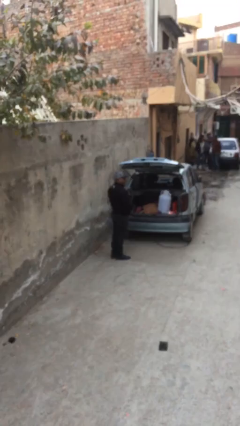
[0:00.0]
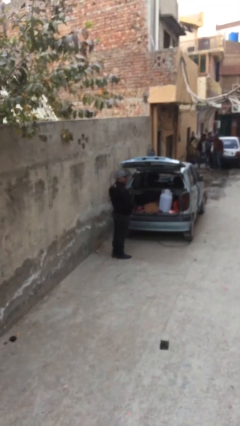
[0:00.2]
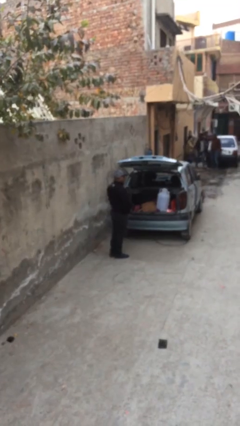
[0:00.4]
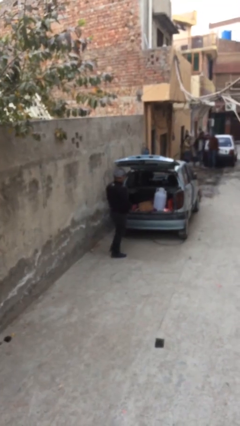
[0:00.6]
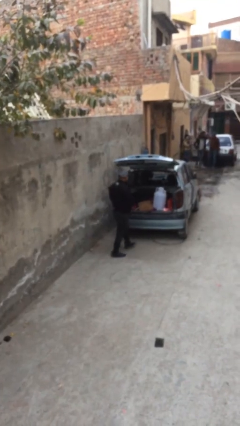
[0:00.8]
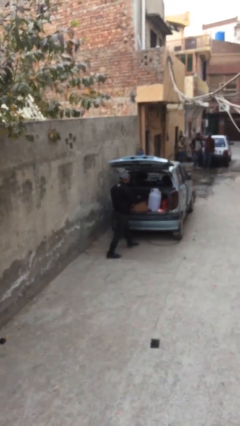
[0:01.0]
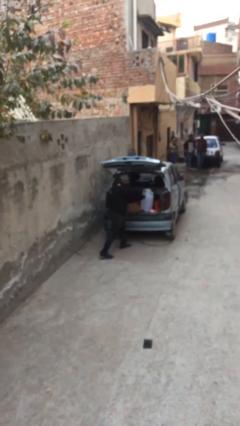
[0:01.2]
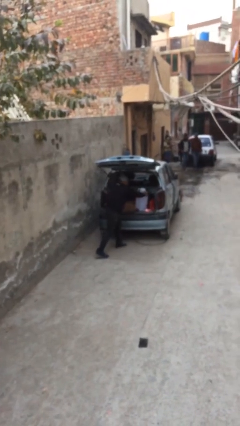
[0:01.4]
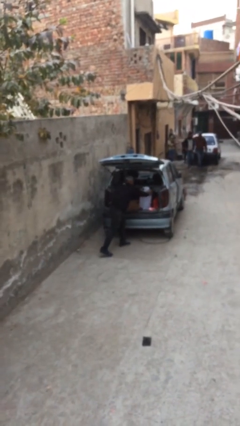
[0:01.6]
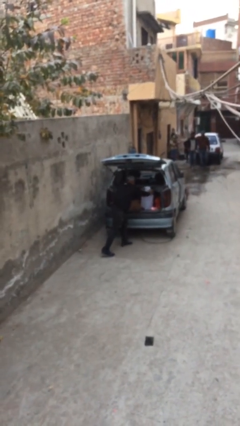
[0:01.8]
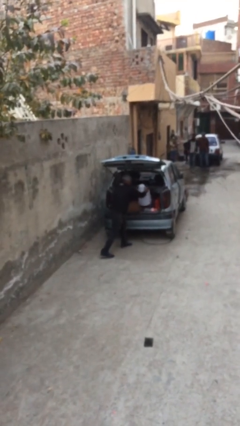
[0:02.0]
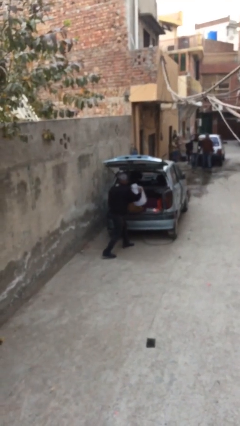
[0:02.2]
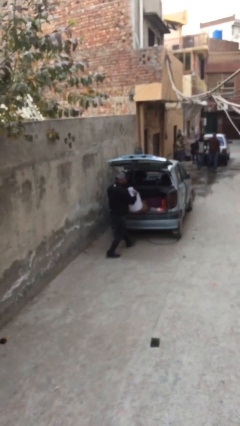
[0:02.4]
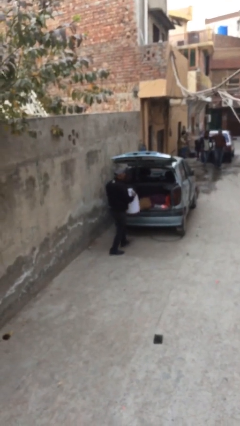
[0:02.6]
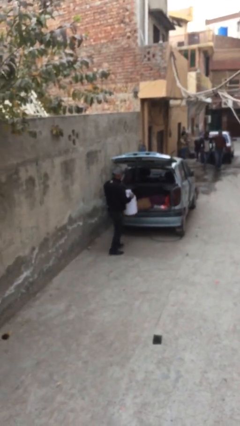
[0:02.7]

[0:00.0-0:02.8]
person unloads car

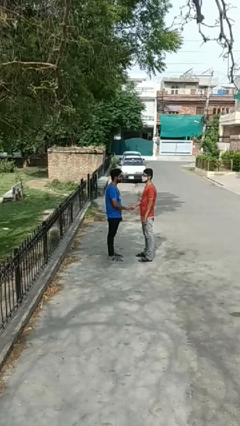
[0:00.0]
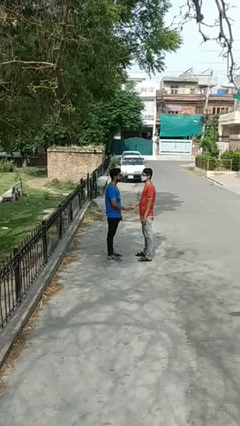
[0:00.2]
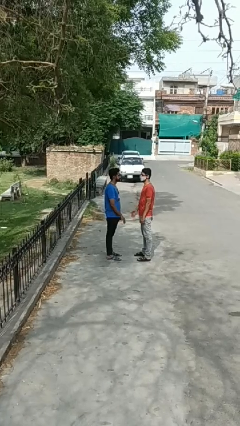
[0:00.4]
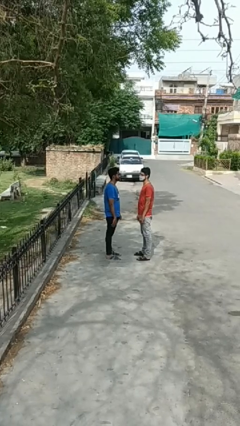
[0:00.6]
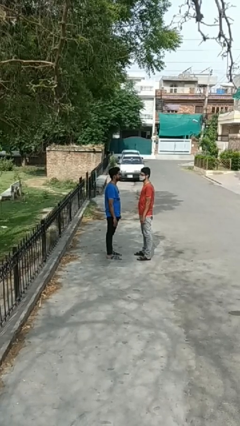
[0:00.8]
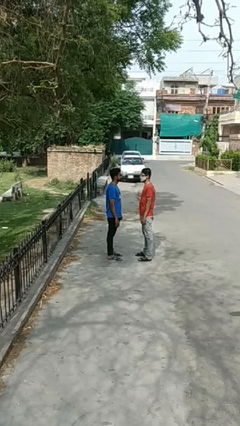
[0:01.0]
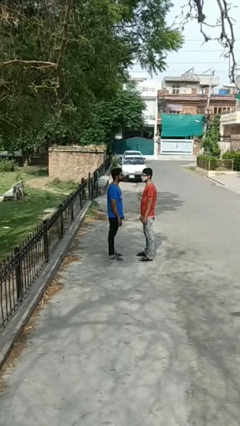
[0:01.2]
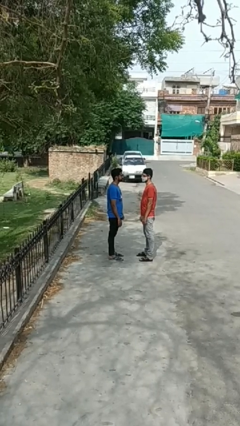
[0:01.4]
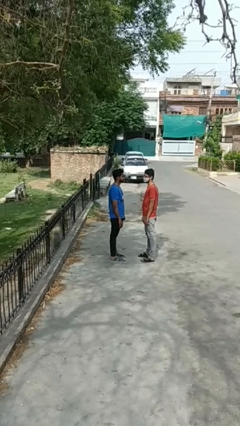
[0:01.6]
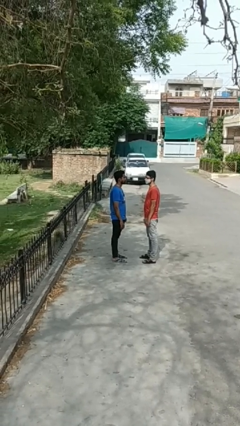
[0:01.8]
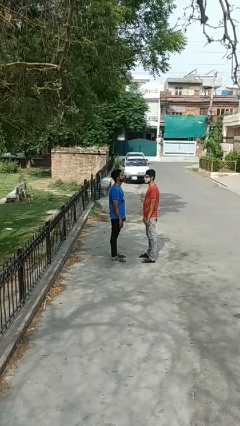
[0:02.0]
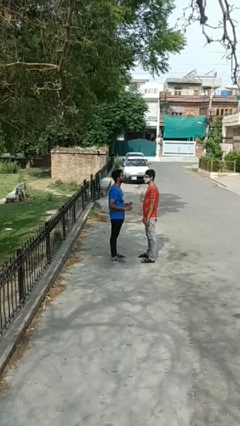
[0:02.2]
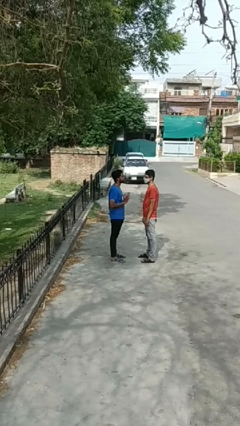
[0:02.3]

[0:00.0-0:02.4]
person highfives hand

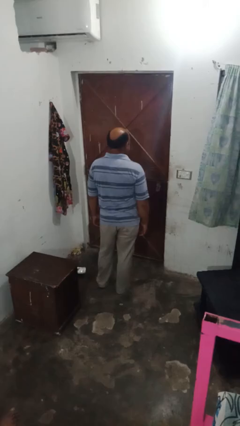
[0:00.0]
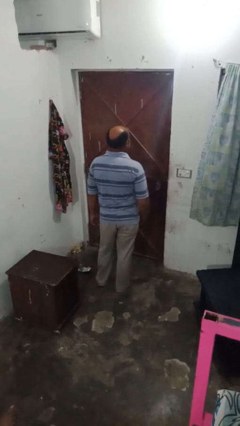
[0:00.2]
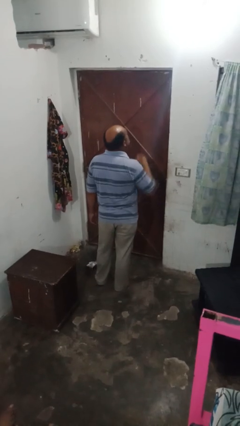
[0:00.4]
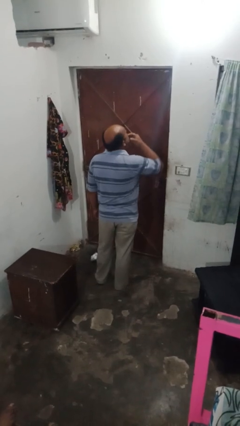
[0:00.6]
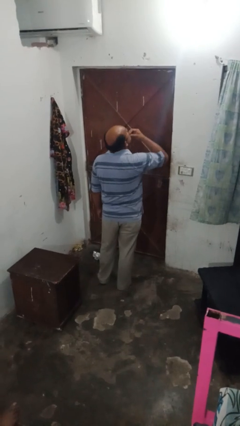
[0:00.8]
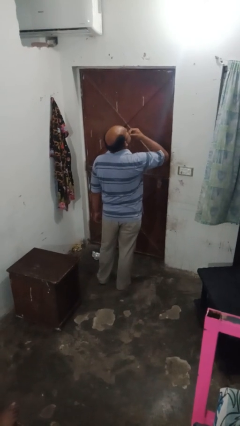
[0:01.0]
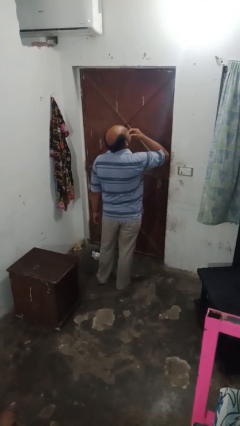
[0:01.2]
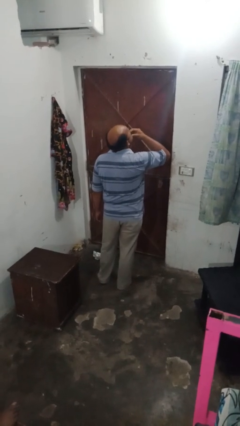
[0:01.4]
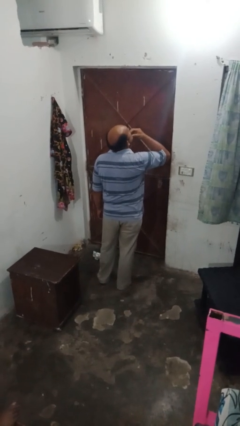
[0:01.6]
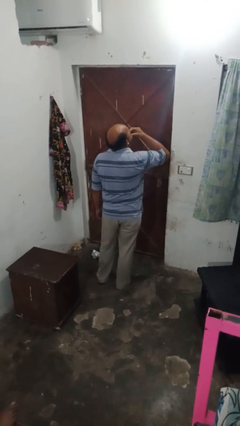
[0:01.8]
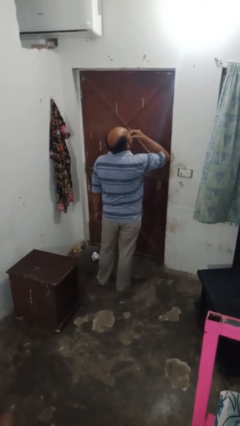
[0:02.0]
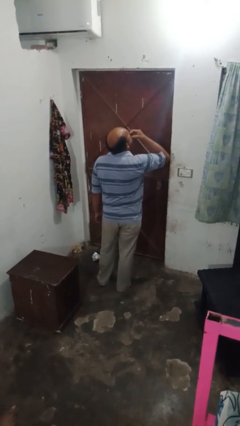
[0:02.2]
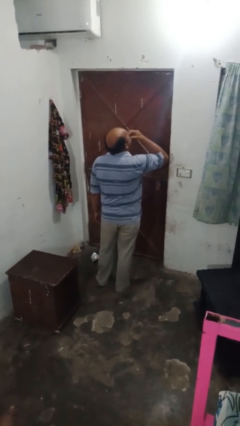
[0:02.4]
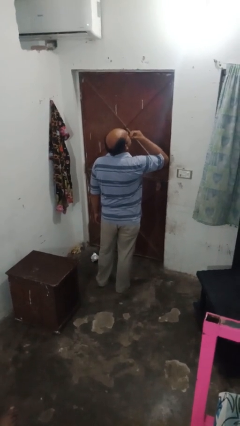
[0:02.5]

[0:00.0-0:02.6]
person strokes chin

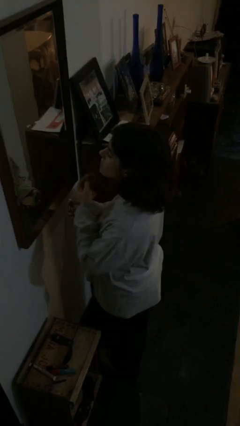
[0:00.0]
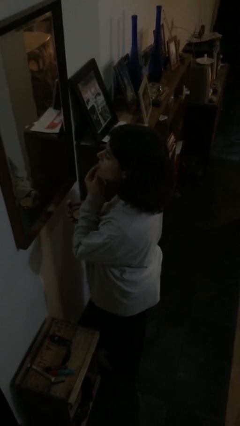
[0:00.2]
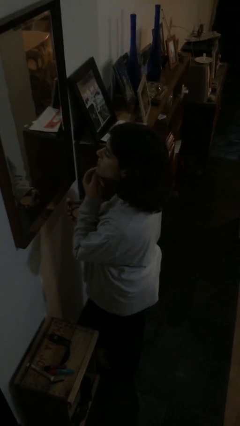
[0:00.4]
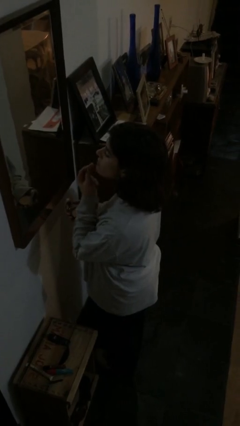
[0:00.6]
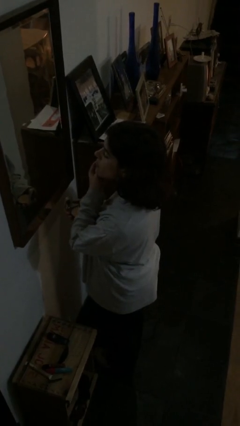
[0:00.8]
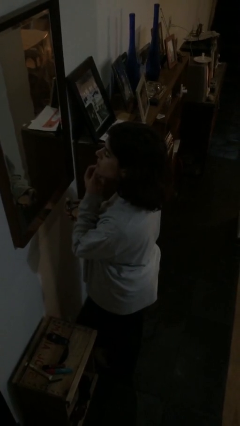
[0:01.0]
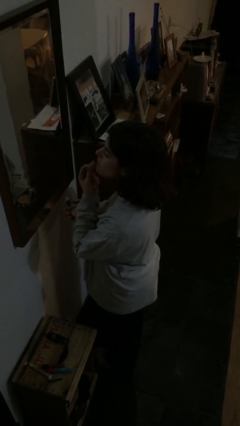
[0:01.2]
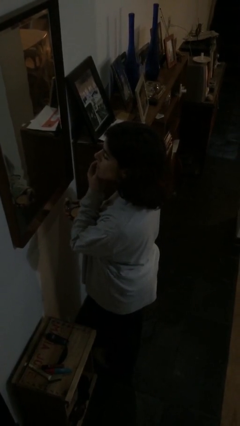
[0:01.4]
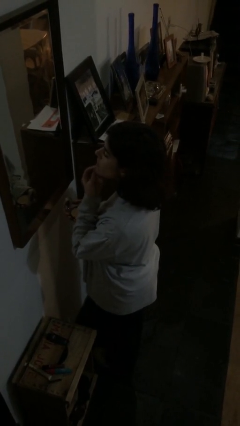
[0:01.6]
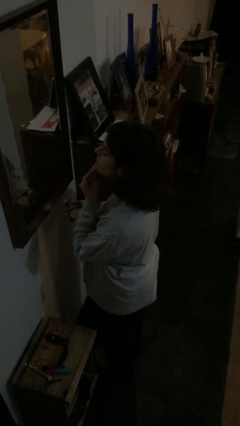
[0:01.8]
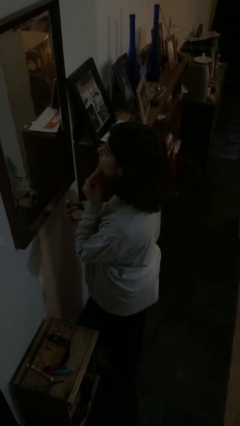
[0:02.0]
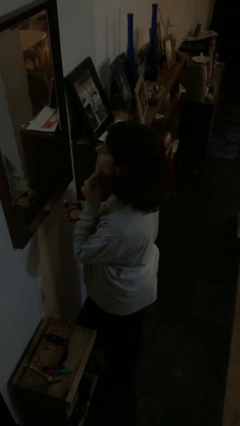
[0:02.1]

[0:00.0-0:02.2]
person applies foundation makeup

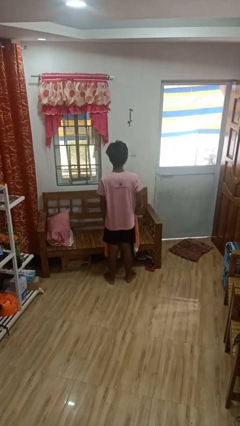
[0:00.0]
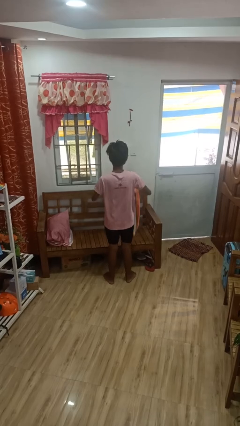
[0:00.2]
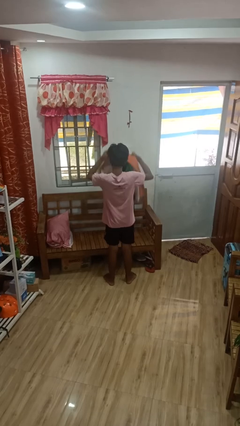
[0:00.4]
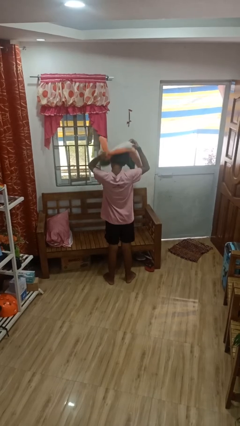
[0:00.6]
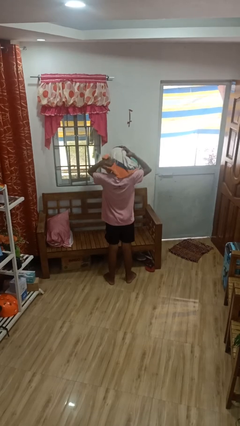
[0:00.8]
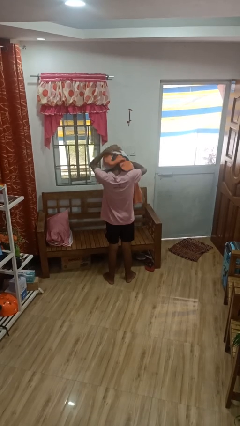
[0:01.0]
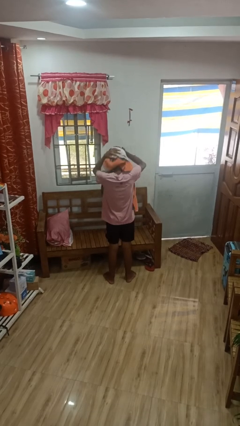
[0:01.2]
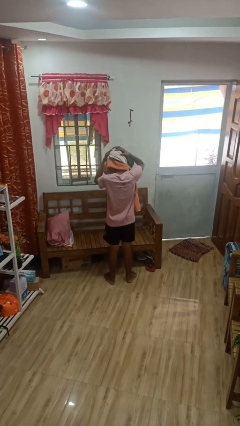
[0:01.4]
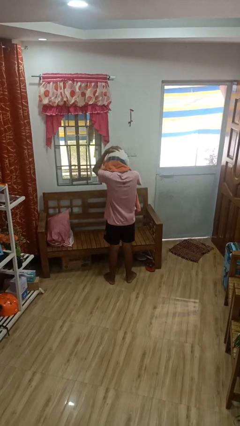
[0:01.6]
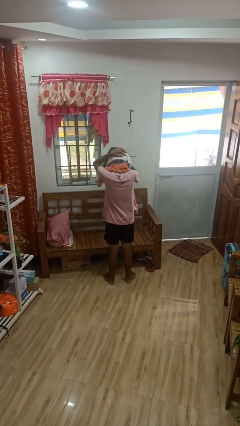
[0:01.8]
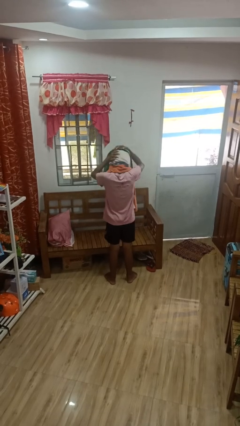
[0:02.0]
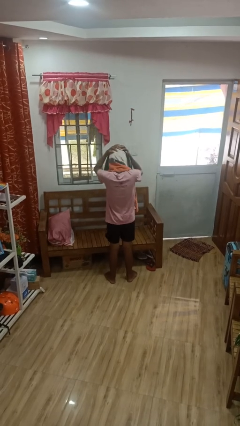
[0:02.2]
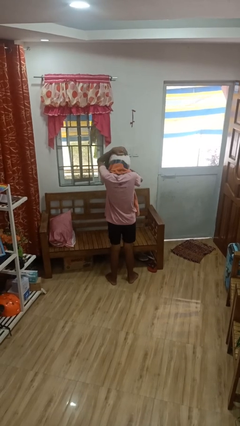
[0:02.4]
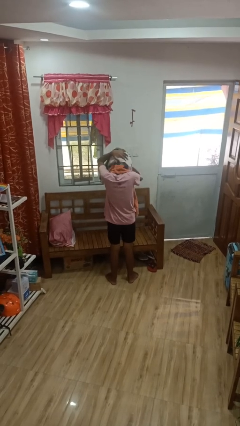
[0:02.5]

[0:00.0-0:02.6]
person dries hair with towel

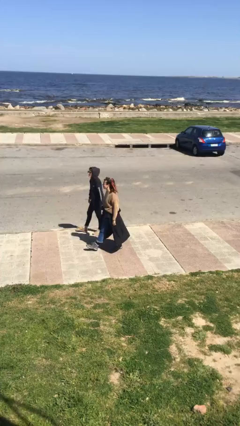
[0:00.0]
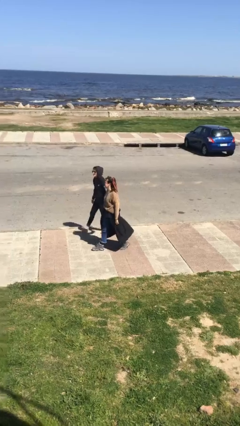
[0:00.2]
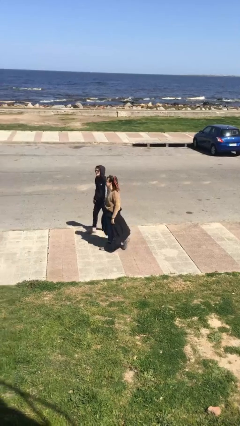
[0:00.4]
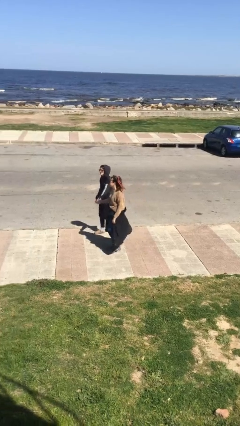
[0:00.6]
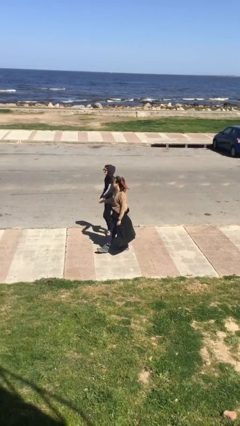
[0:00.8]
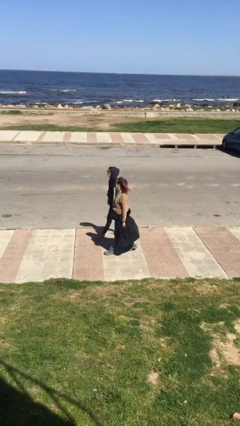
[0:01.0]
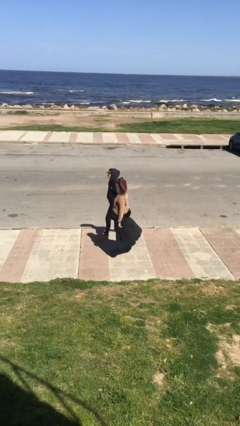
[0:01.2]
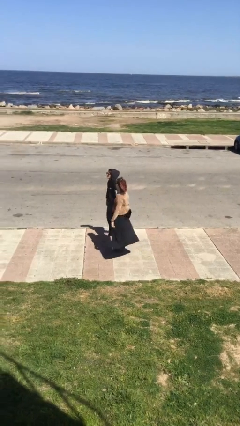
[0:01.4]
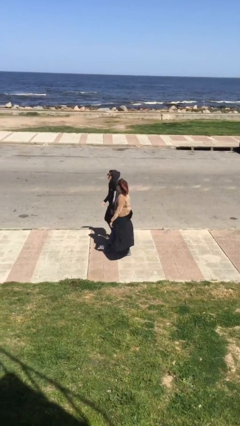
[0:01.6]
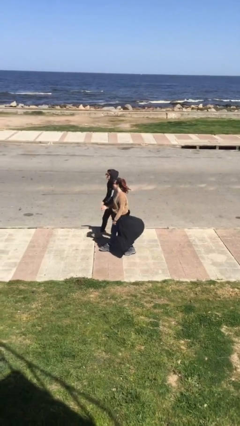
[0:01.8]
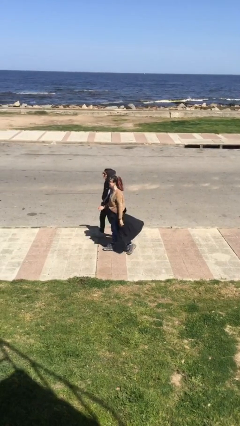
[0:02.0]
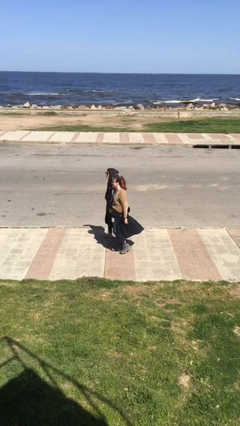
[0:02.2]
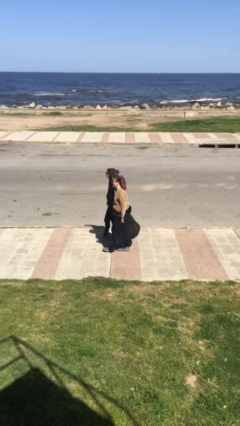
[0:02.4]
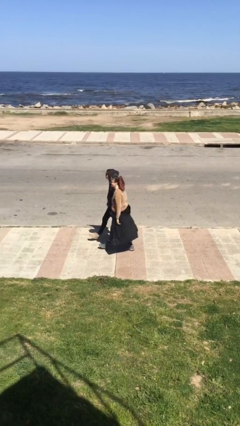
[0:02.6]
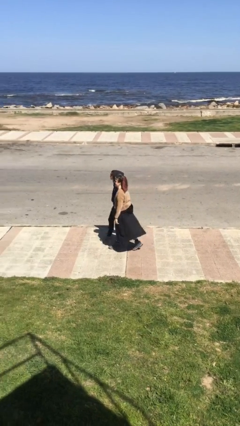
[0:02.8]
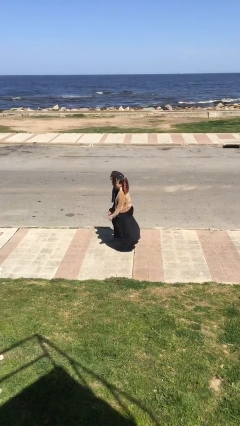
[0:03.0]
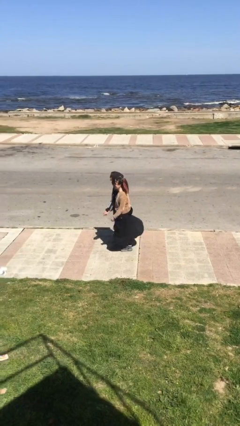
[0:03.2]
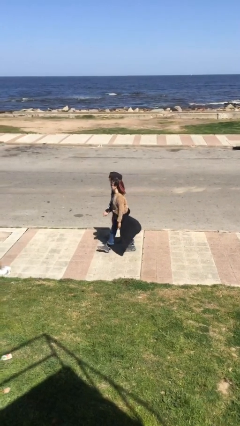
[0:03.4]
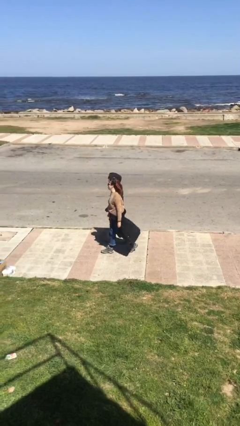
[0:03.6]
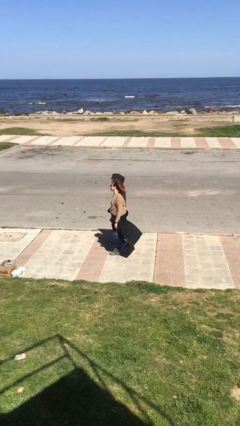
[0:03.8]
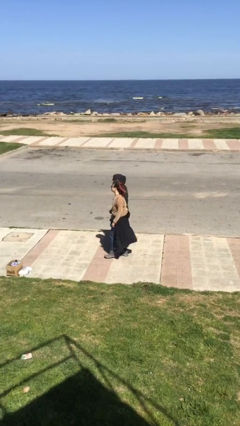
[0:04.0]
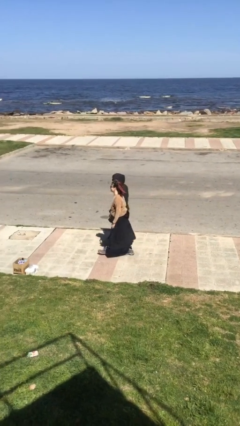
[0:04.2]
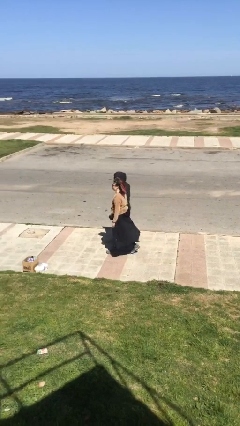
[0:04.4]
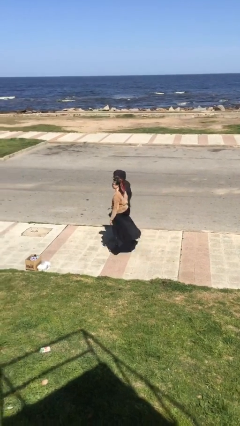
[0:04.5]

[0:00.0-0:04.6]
person holds hand
